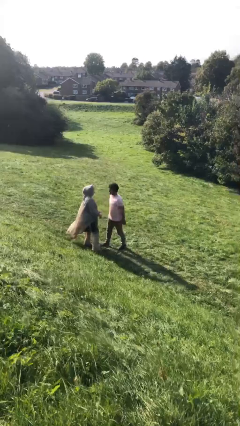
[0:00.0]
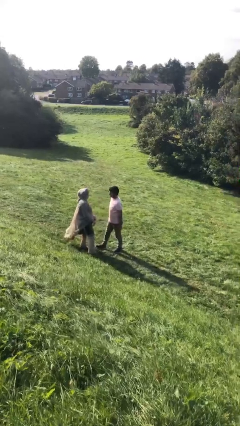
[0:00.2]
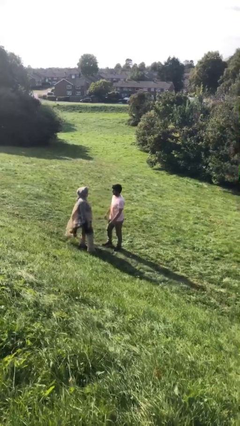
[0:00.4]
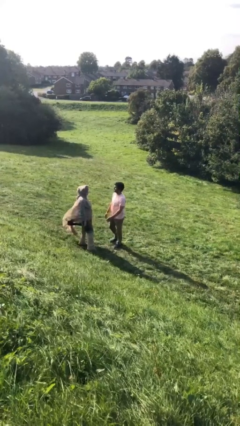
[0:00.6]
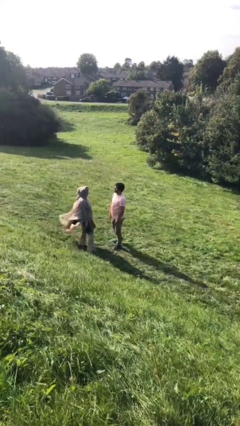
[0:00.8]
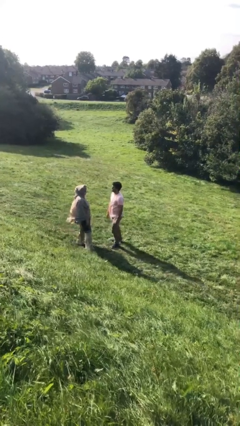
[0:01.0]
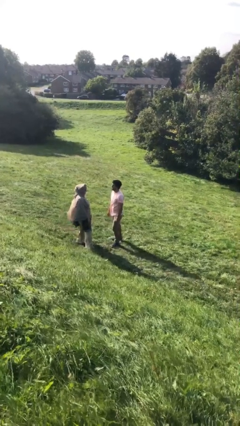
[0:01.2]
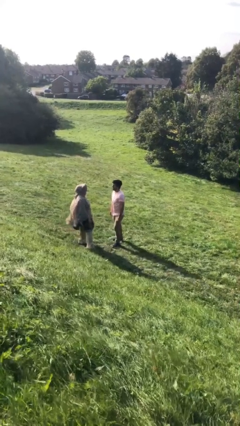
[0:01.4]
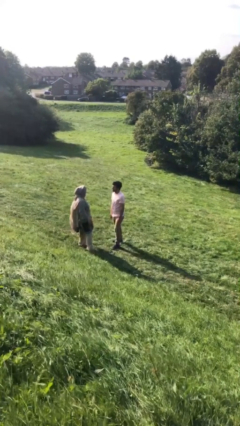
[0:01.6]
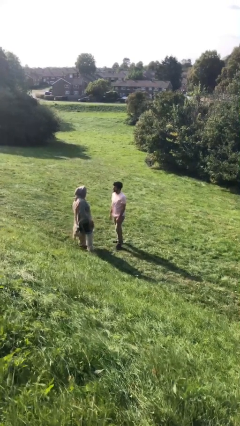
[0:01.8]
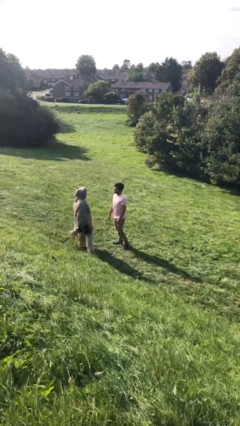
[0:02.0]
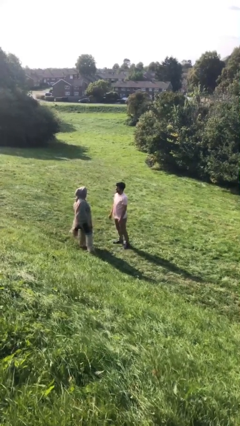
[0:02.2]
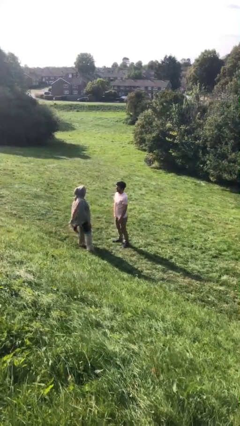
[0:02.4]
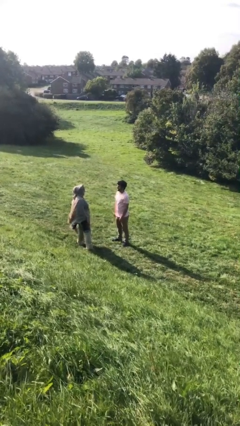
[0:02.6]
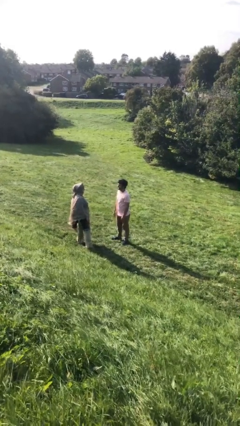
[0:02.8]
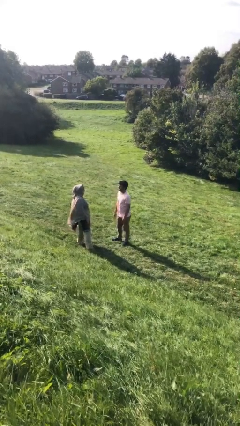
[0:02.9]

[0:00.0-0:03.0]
person talks to person

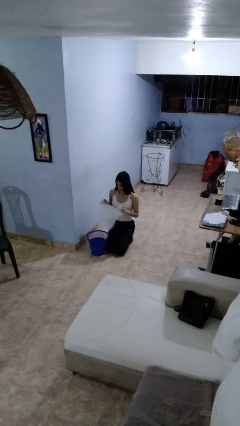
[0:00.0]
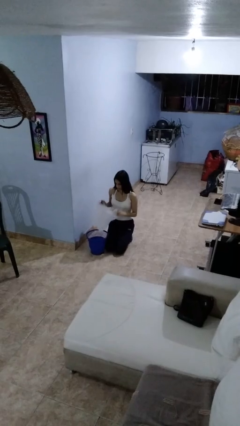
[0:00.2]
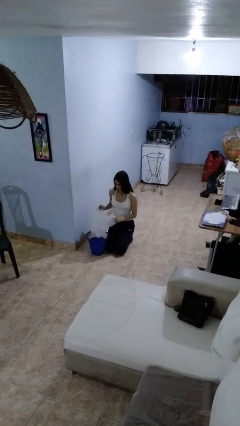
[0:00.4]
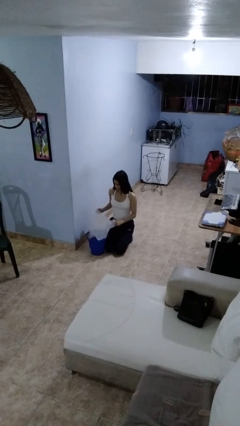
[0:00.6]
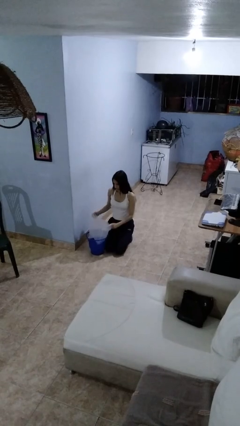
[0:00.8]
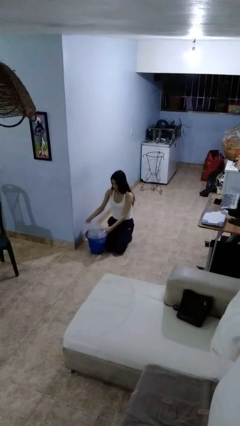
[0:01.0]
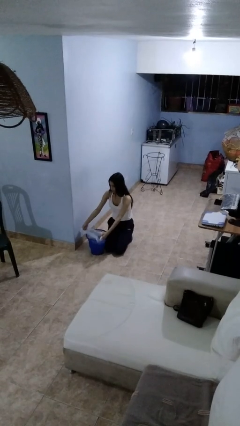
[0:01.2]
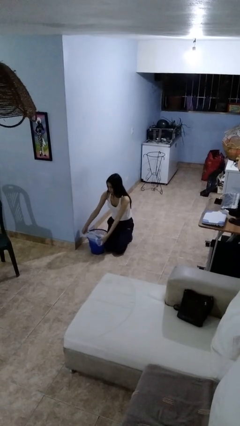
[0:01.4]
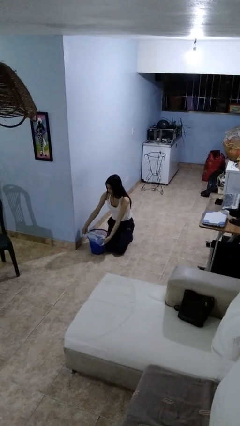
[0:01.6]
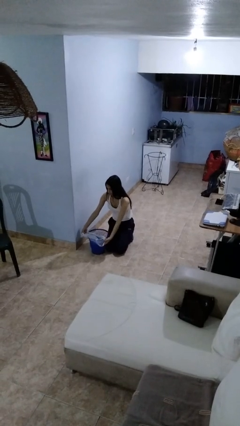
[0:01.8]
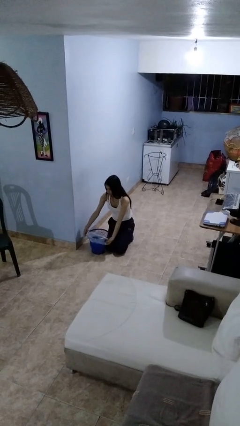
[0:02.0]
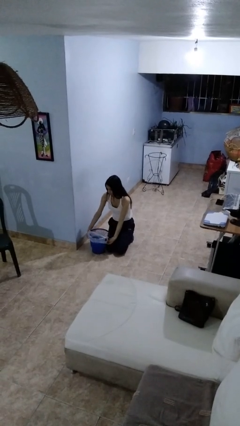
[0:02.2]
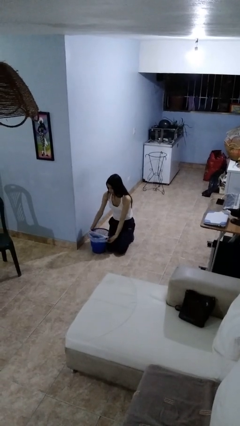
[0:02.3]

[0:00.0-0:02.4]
person inserts trashbag into trashcan

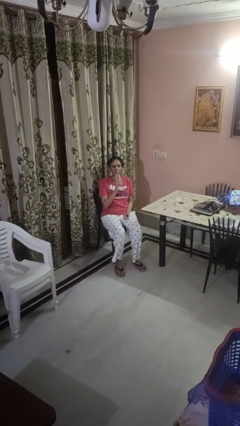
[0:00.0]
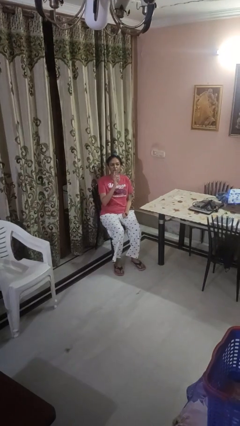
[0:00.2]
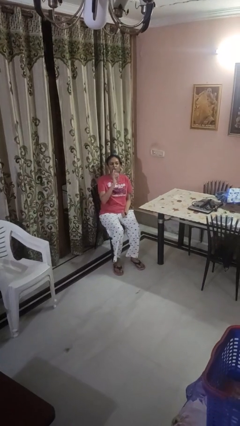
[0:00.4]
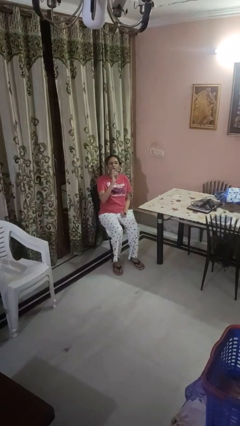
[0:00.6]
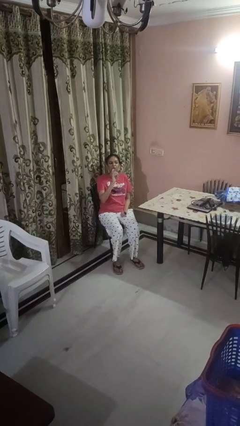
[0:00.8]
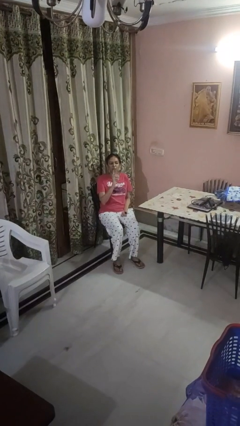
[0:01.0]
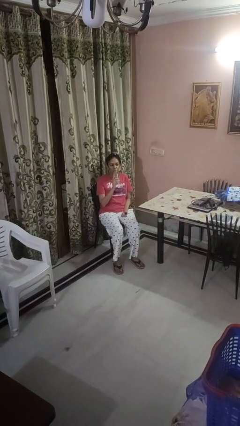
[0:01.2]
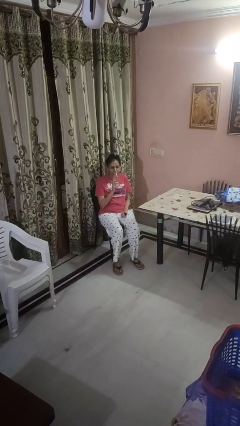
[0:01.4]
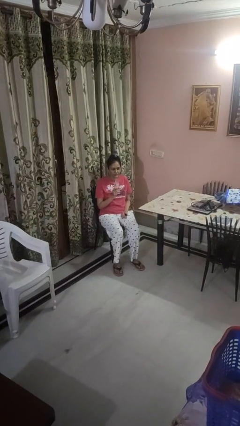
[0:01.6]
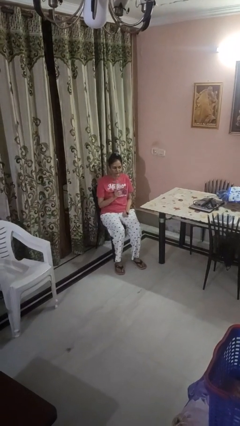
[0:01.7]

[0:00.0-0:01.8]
person drinks from bottle

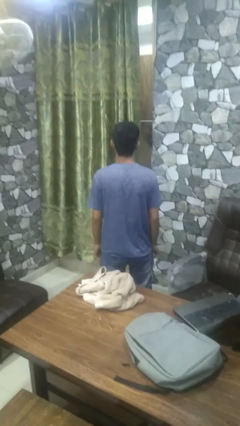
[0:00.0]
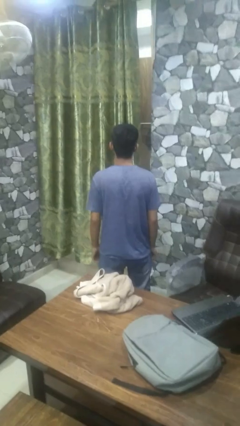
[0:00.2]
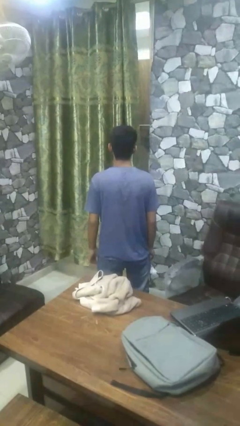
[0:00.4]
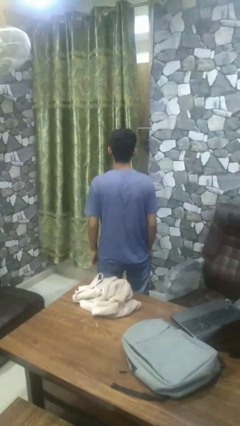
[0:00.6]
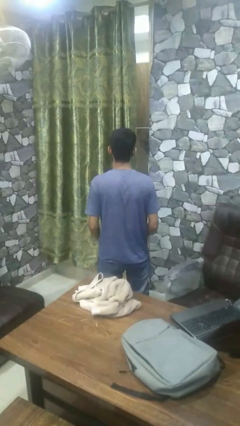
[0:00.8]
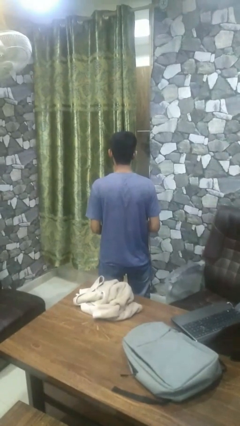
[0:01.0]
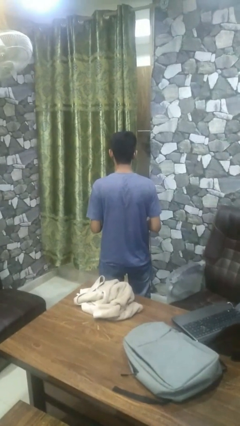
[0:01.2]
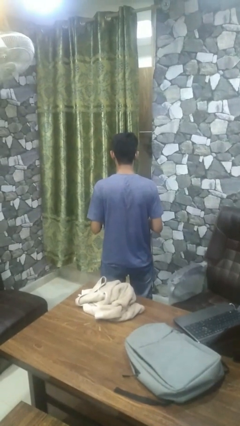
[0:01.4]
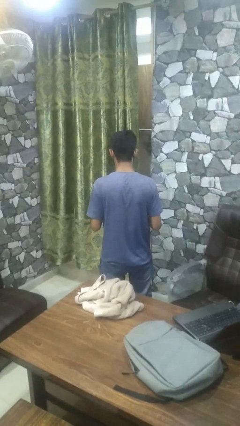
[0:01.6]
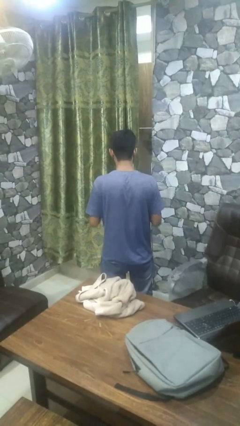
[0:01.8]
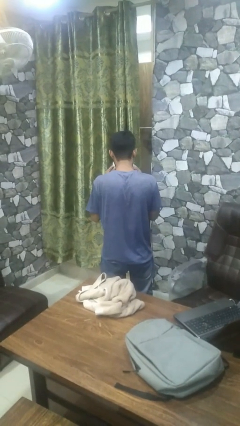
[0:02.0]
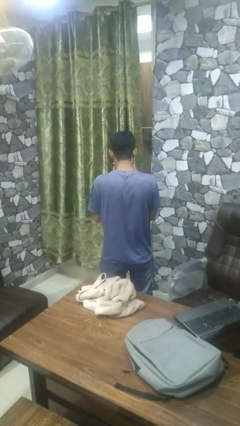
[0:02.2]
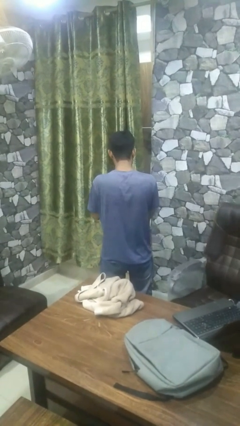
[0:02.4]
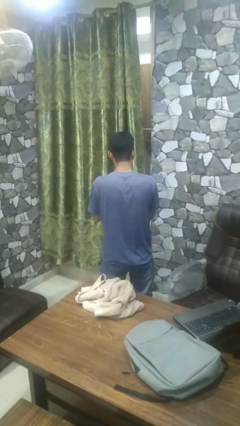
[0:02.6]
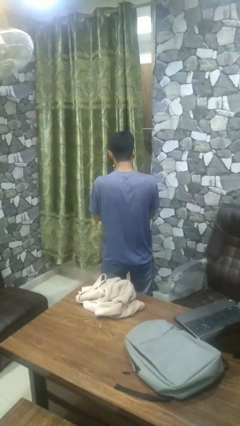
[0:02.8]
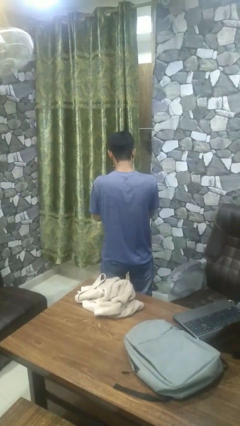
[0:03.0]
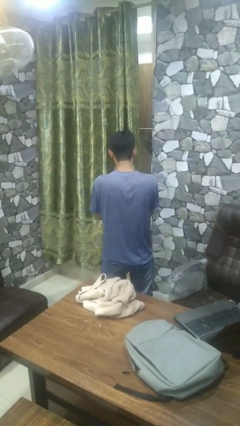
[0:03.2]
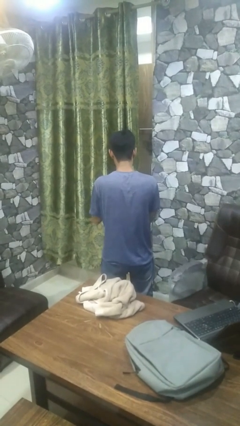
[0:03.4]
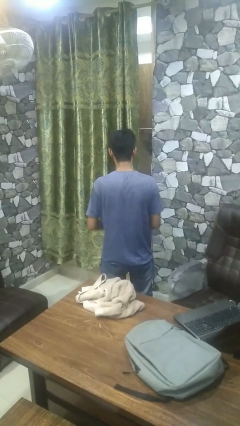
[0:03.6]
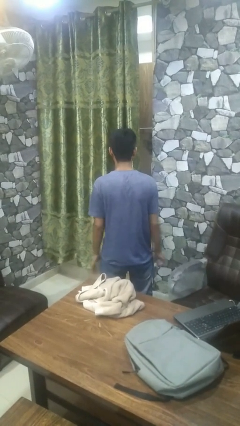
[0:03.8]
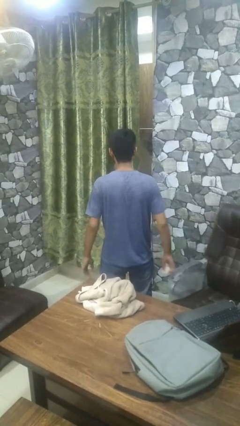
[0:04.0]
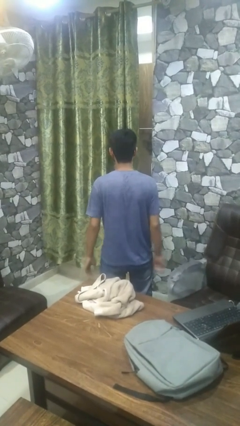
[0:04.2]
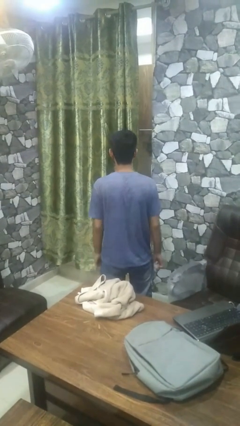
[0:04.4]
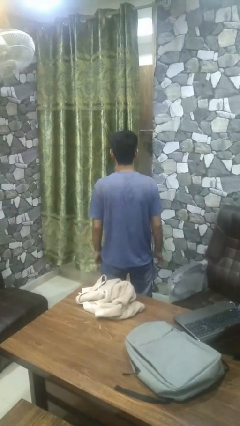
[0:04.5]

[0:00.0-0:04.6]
person blows nose

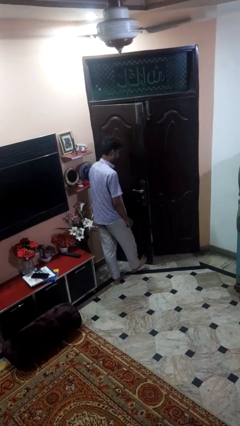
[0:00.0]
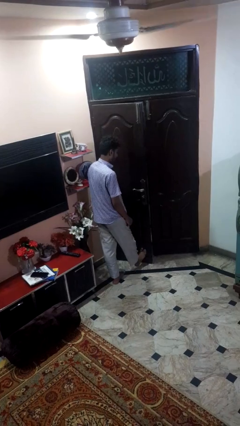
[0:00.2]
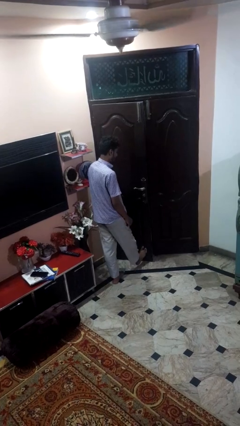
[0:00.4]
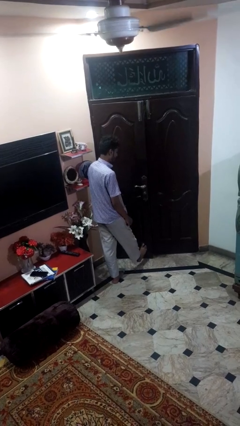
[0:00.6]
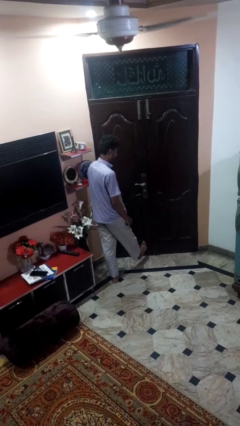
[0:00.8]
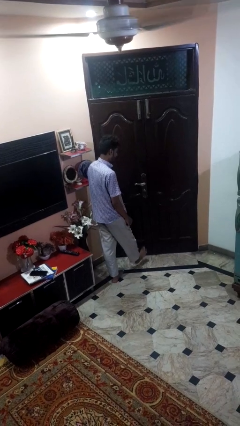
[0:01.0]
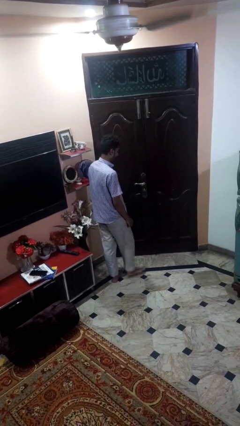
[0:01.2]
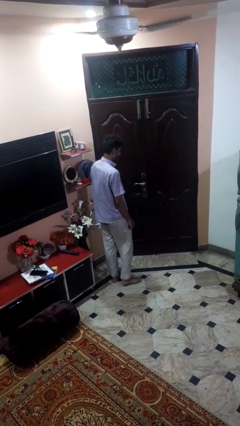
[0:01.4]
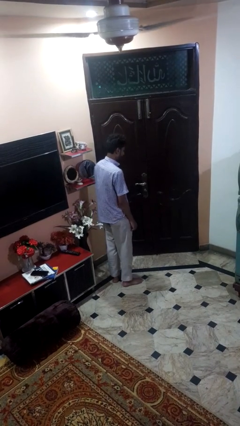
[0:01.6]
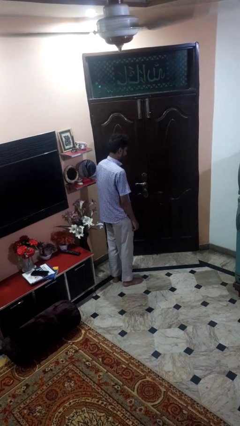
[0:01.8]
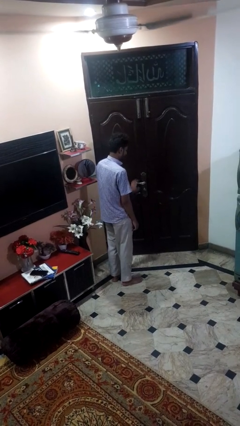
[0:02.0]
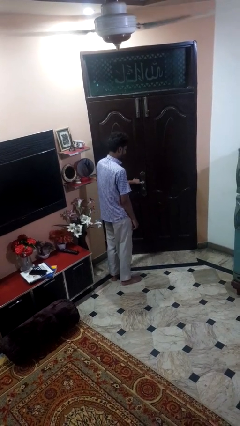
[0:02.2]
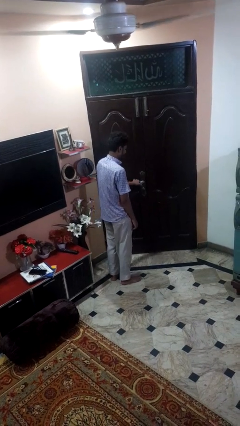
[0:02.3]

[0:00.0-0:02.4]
person closes door with foot

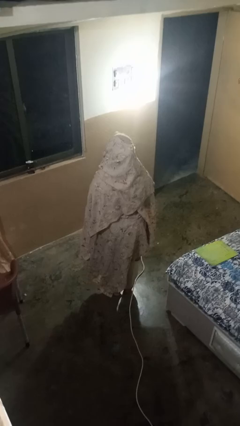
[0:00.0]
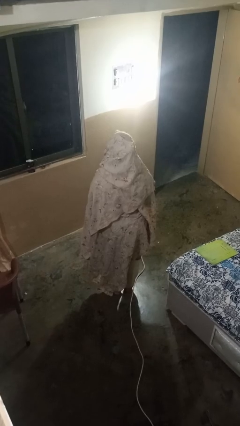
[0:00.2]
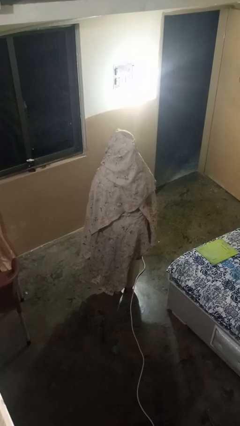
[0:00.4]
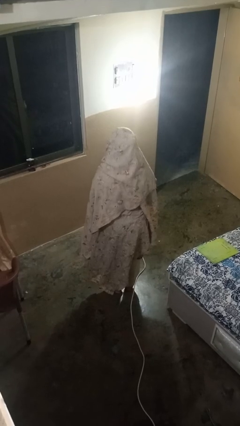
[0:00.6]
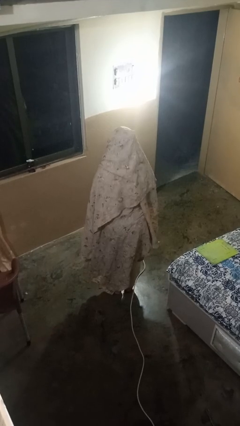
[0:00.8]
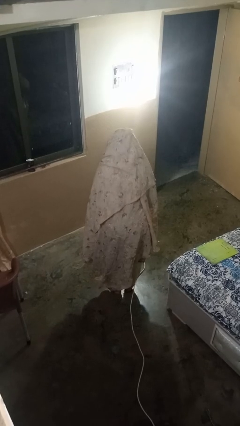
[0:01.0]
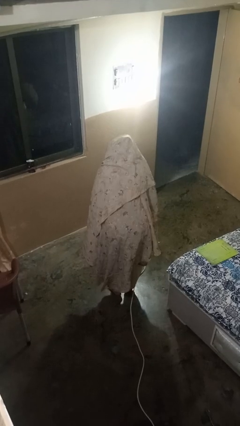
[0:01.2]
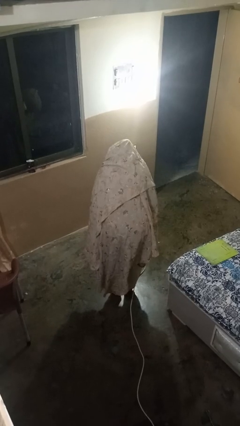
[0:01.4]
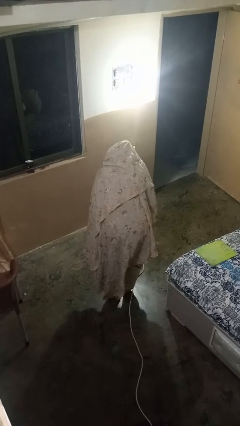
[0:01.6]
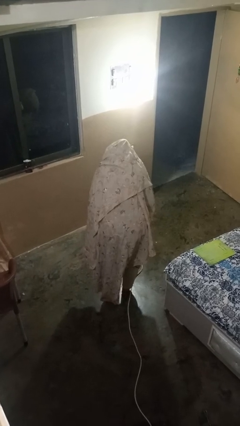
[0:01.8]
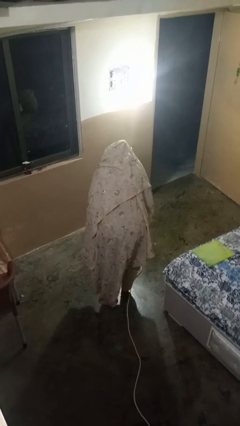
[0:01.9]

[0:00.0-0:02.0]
person bows

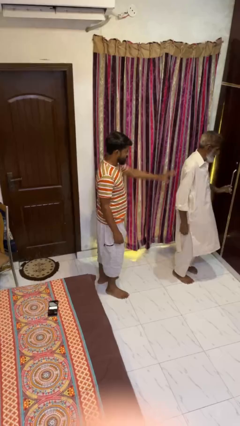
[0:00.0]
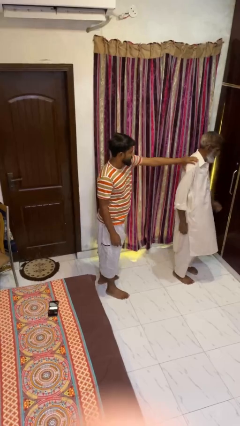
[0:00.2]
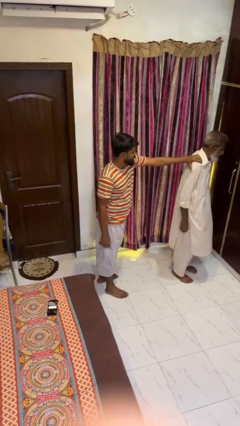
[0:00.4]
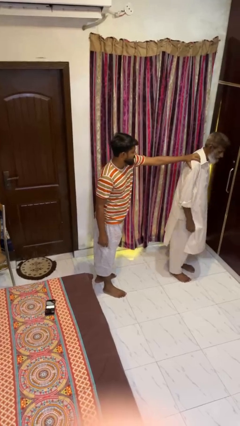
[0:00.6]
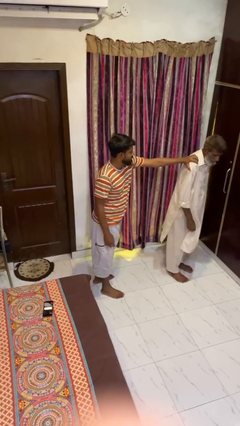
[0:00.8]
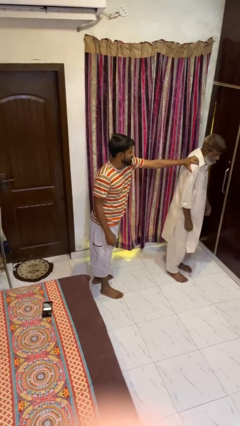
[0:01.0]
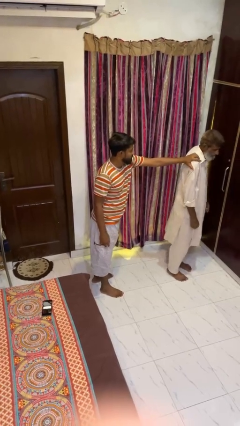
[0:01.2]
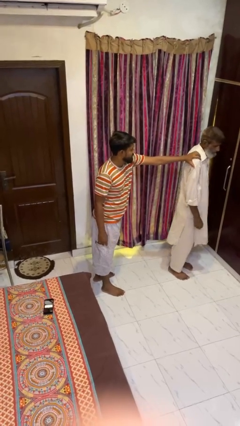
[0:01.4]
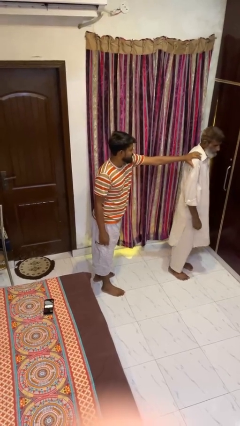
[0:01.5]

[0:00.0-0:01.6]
person grabs person by shoulder
